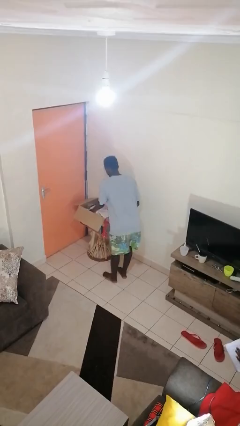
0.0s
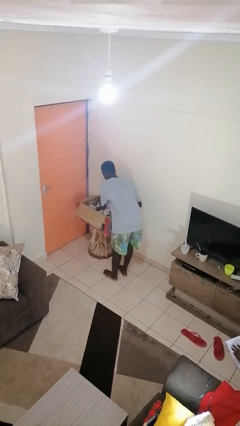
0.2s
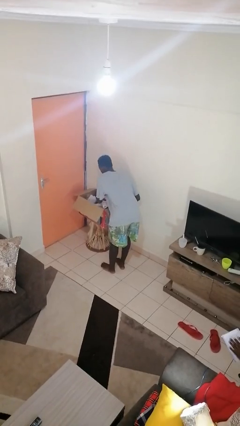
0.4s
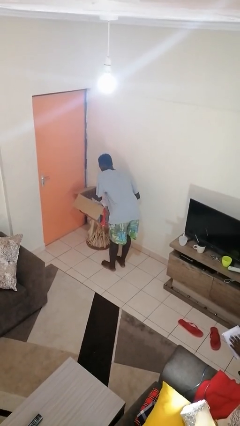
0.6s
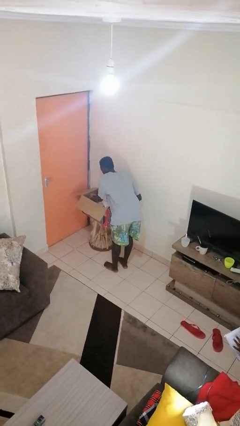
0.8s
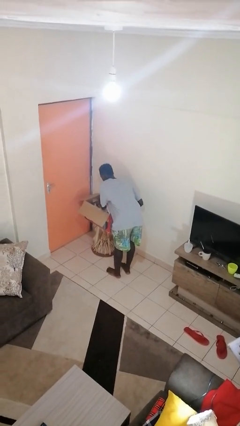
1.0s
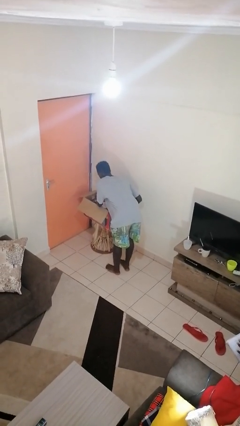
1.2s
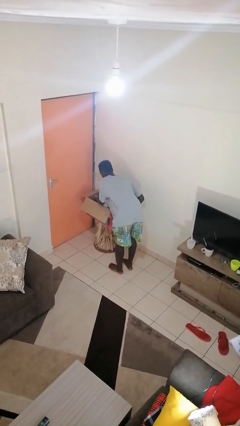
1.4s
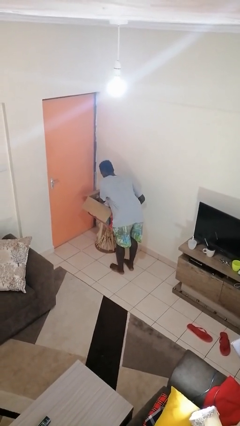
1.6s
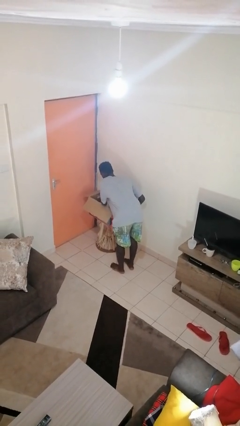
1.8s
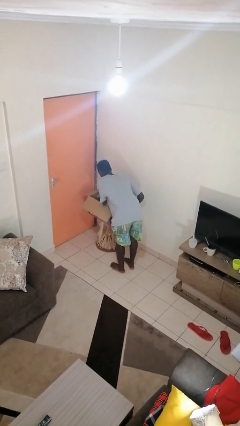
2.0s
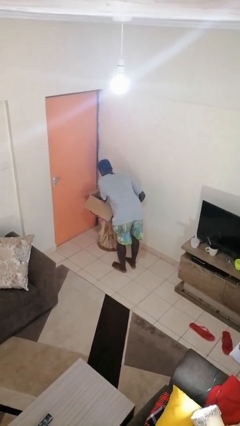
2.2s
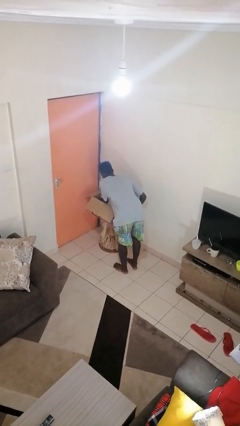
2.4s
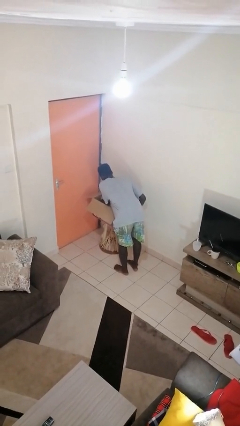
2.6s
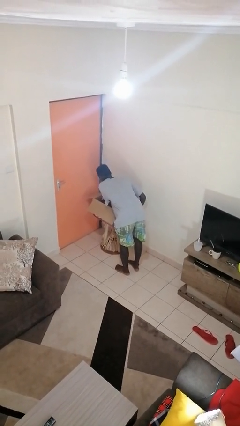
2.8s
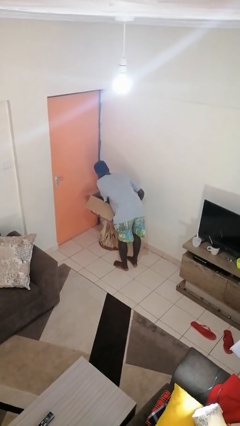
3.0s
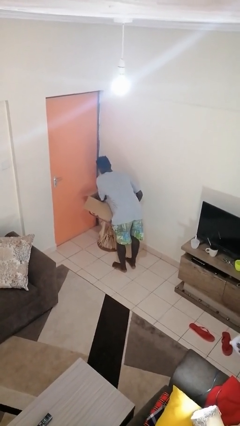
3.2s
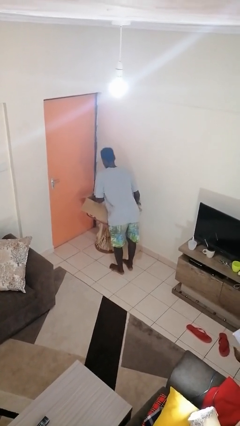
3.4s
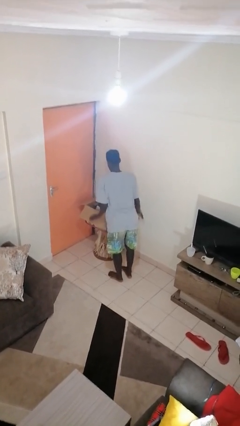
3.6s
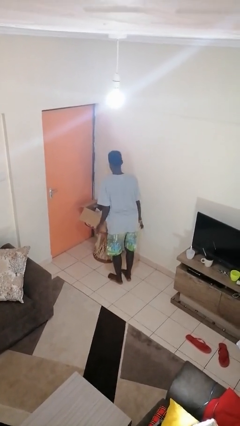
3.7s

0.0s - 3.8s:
person searches in box

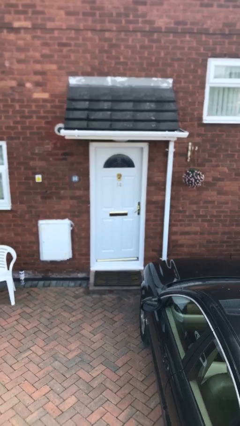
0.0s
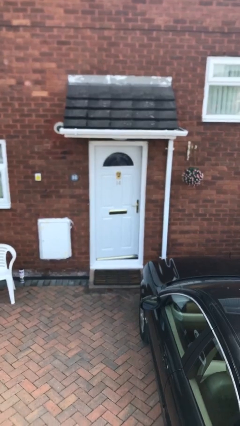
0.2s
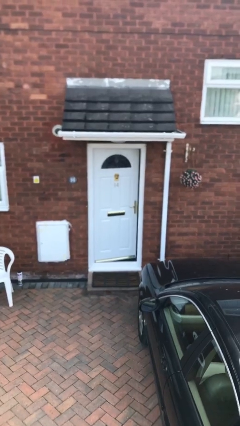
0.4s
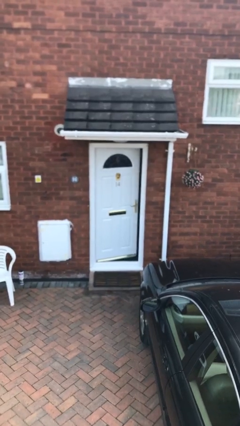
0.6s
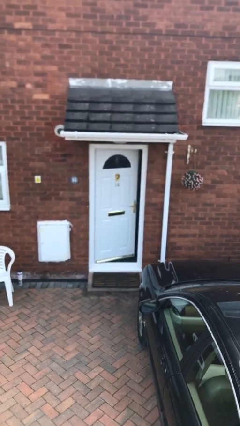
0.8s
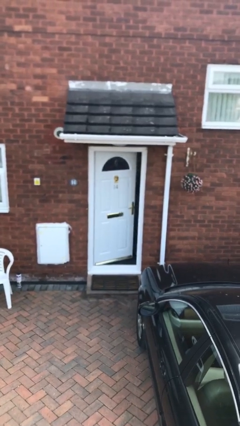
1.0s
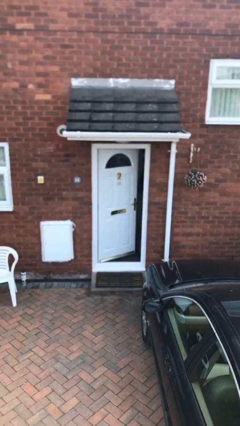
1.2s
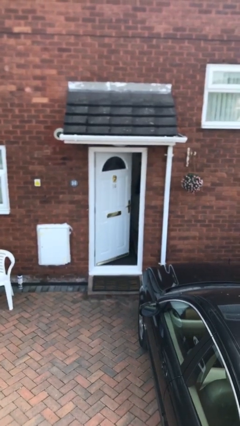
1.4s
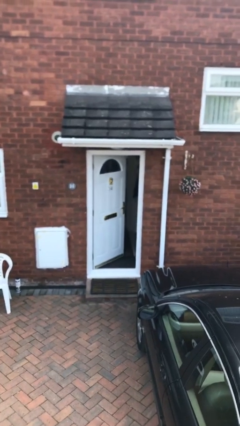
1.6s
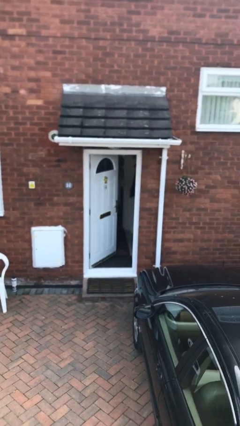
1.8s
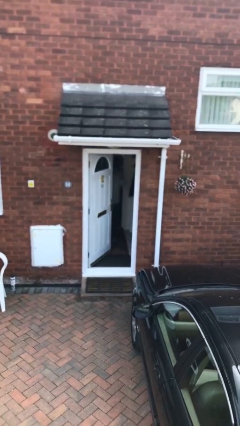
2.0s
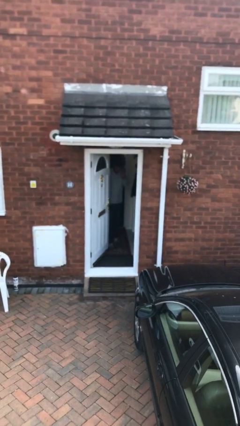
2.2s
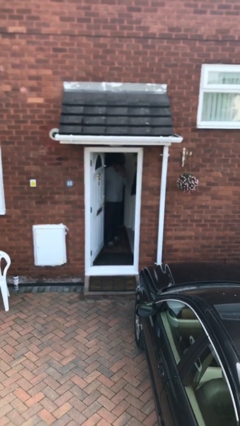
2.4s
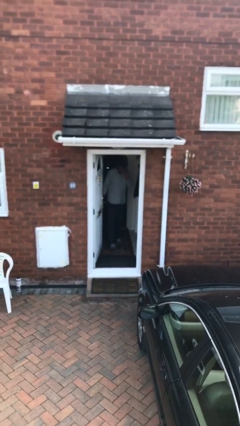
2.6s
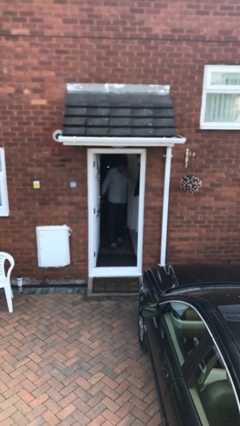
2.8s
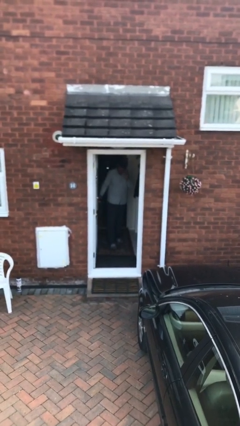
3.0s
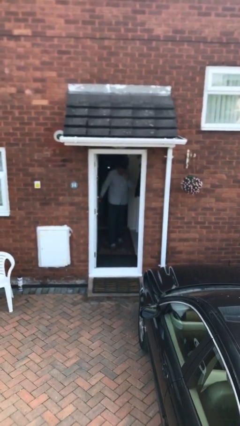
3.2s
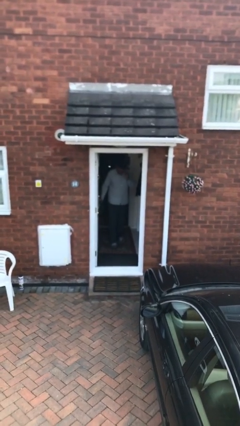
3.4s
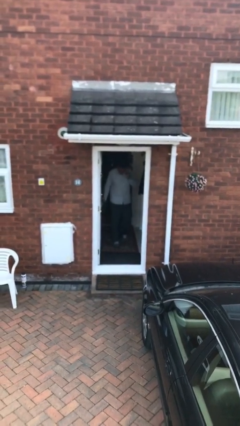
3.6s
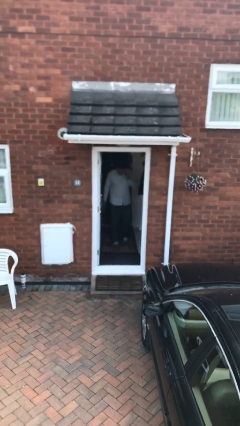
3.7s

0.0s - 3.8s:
person opens facility door

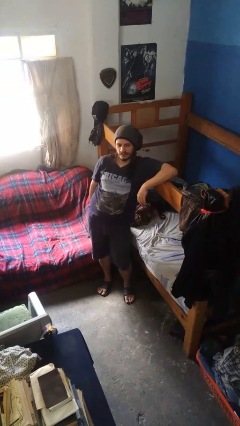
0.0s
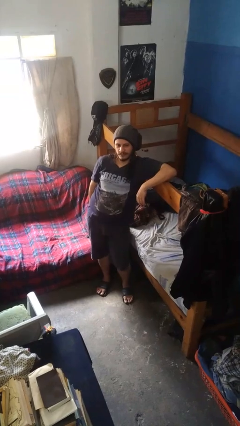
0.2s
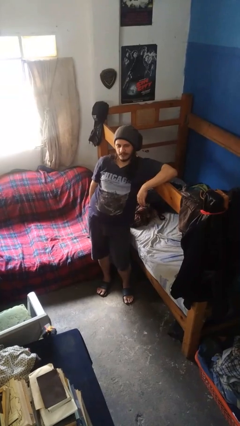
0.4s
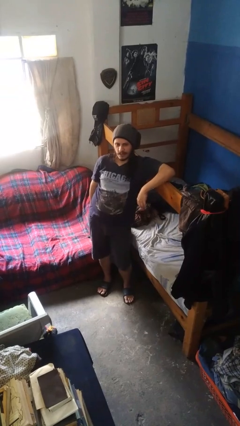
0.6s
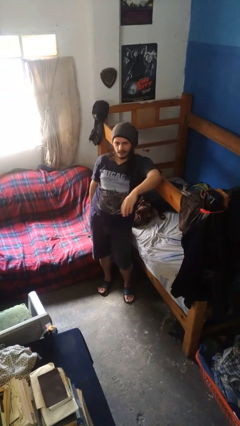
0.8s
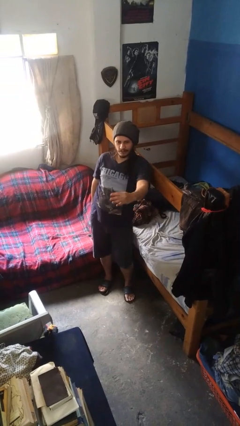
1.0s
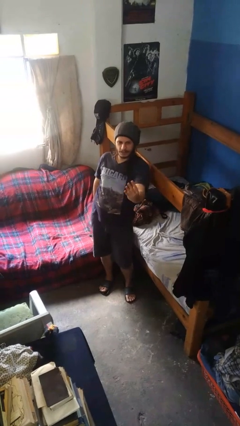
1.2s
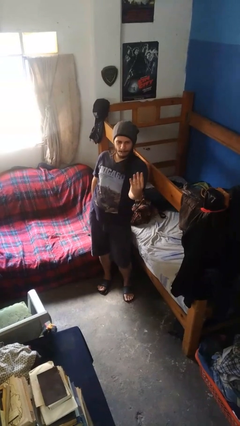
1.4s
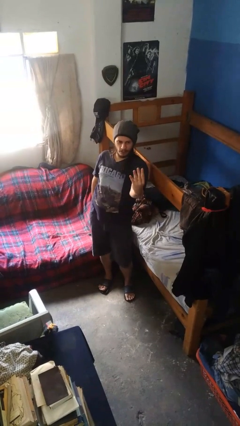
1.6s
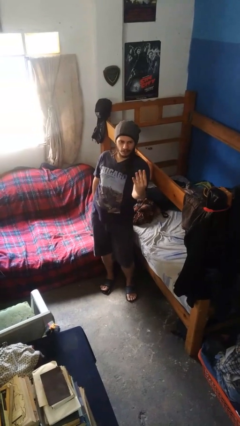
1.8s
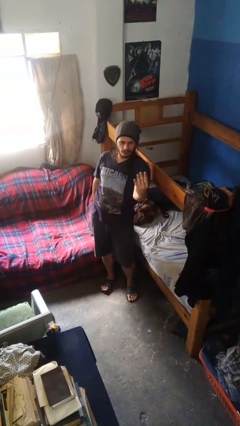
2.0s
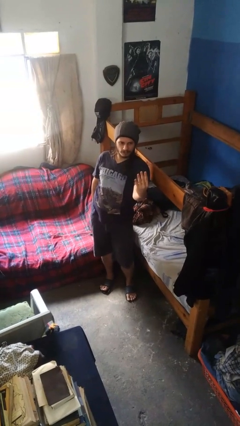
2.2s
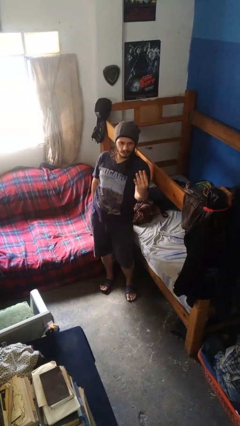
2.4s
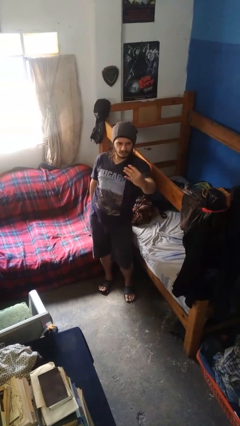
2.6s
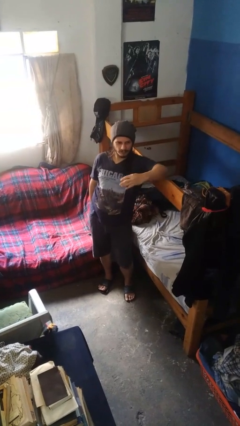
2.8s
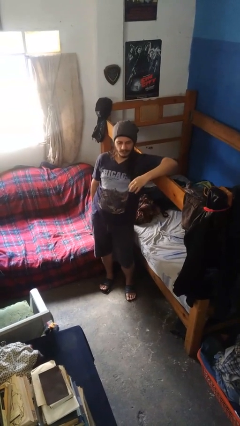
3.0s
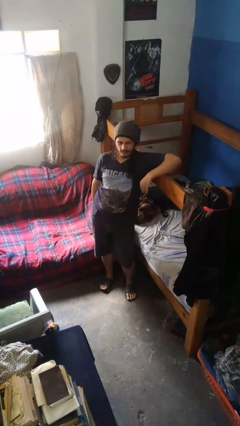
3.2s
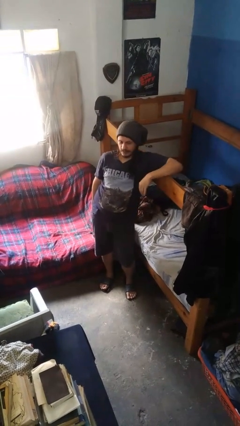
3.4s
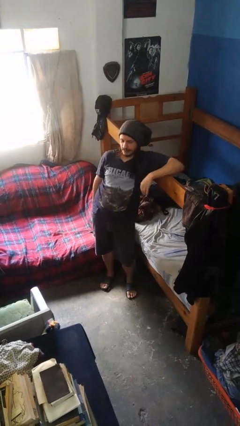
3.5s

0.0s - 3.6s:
person gestures number four

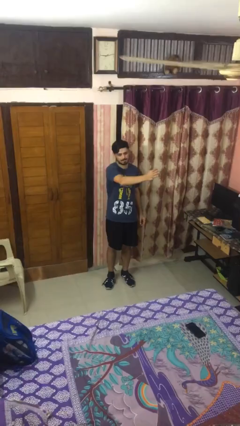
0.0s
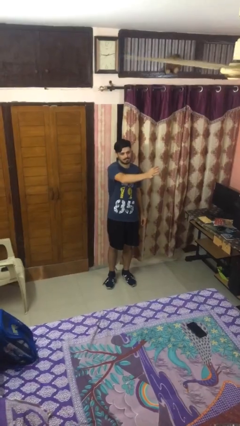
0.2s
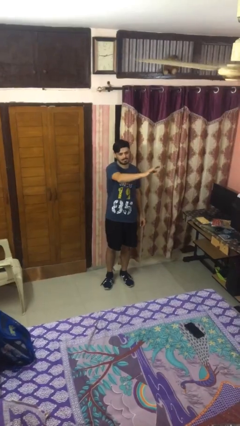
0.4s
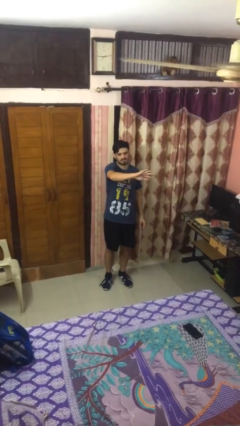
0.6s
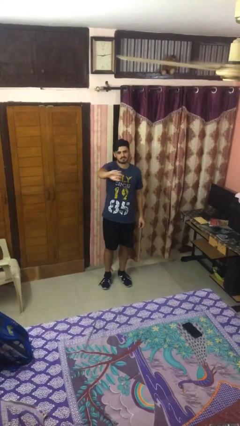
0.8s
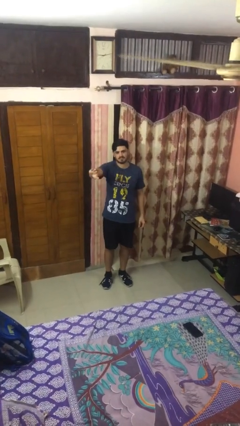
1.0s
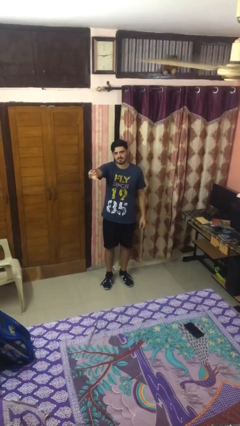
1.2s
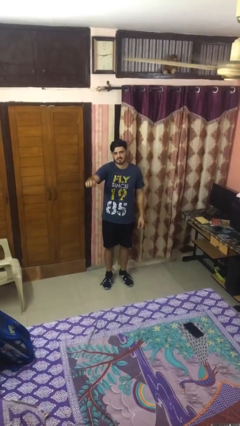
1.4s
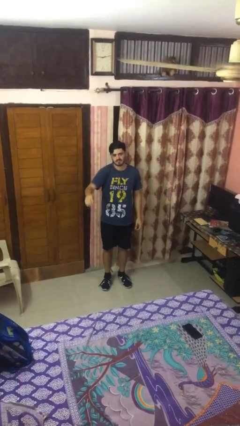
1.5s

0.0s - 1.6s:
person gestures swipe right

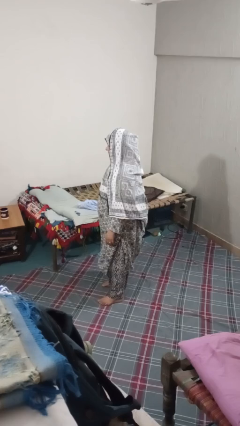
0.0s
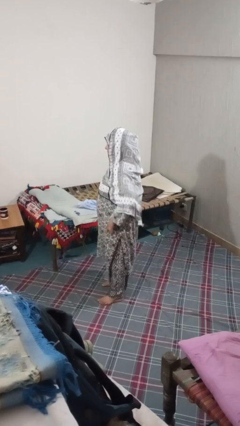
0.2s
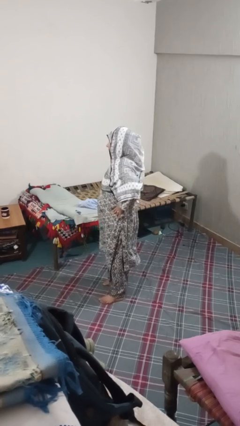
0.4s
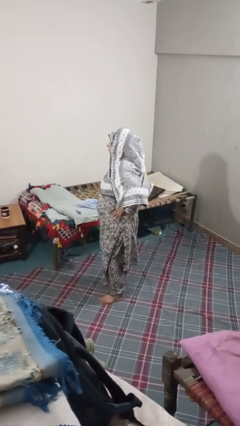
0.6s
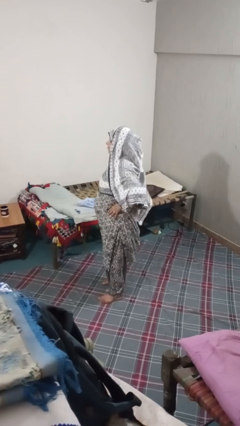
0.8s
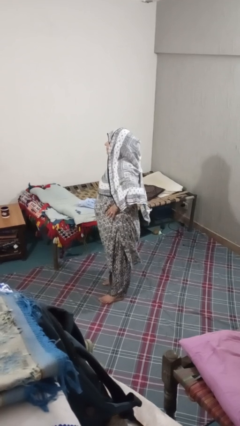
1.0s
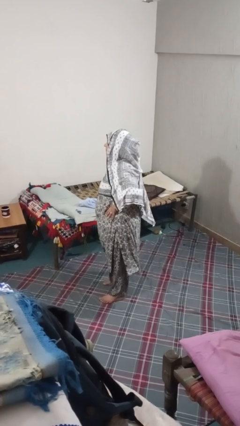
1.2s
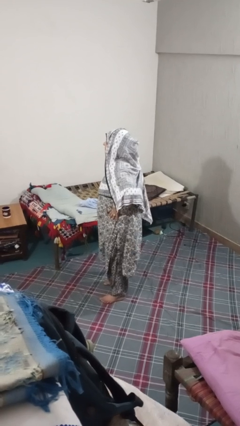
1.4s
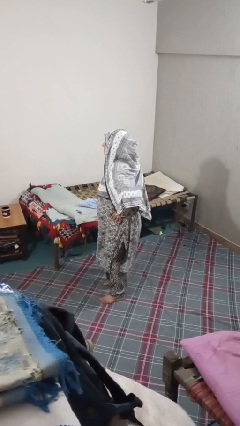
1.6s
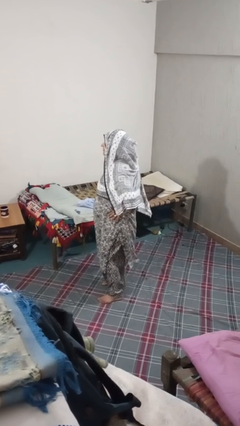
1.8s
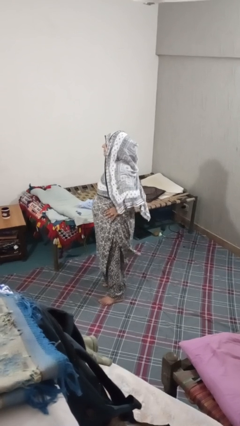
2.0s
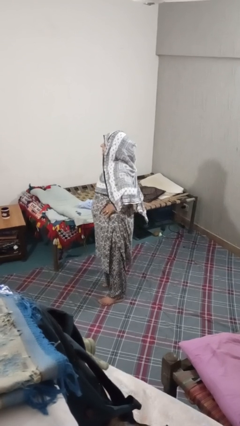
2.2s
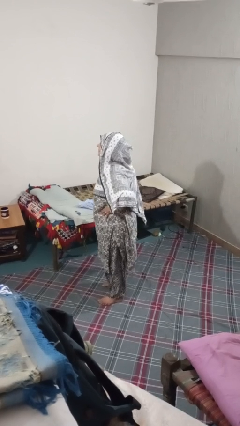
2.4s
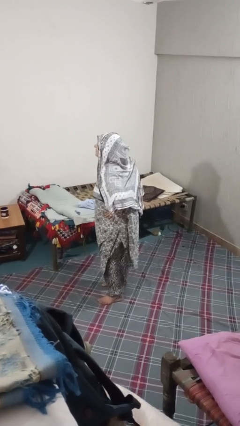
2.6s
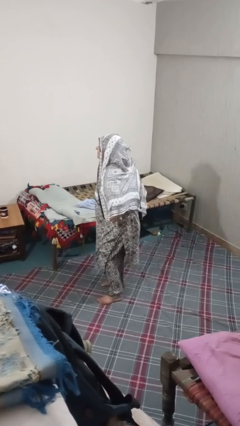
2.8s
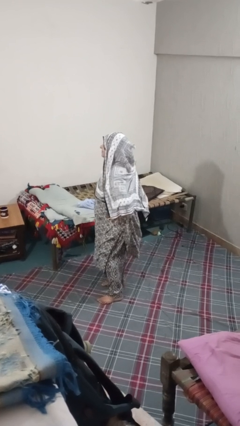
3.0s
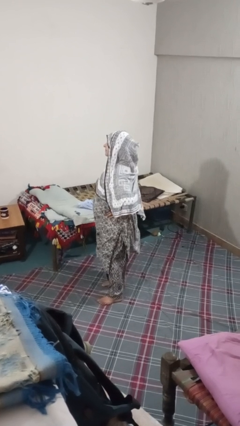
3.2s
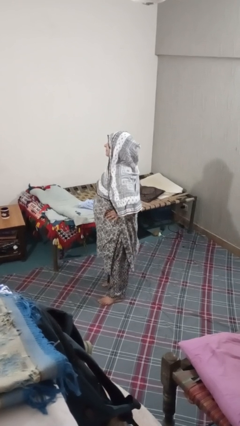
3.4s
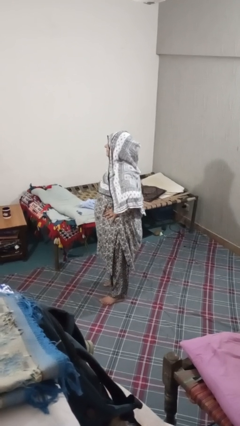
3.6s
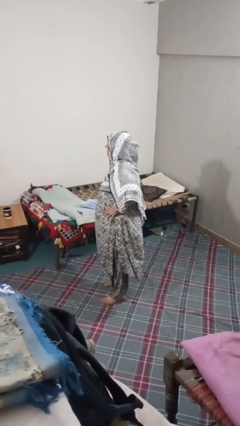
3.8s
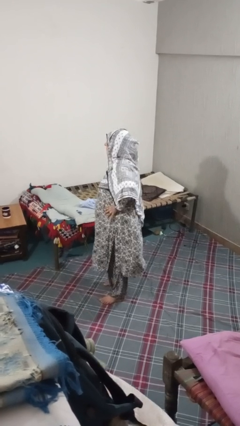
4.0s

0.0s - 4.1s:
person wiggles hips

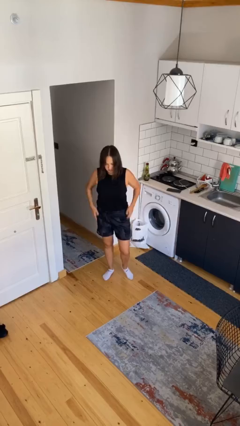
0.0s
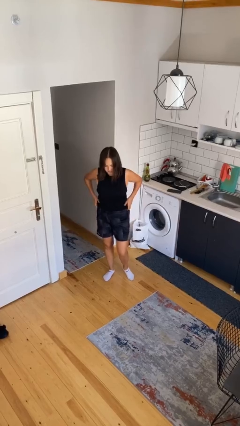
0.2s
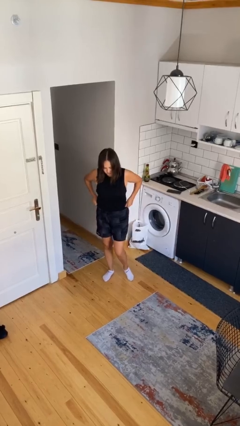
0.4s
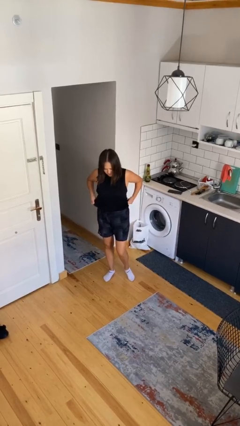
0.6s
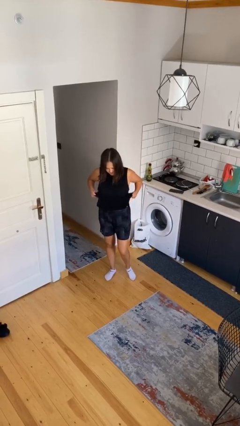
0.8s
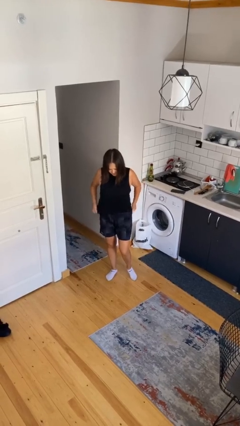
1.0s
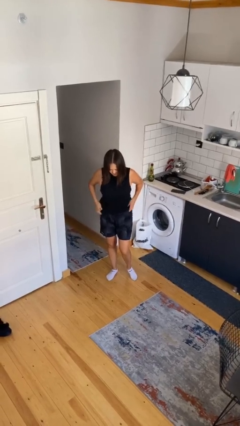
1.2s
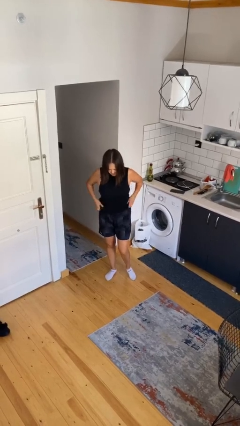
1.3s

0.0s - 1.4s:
person untucks shirt
